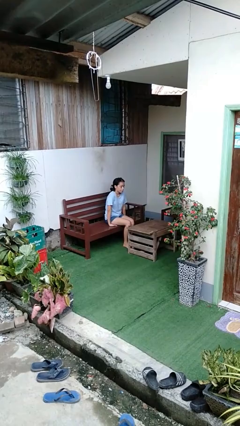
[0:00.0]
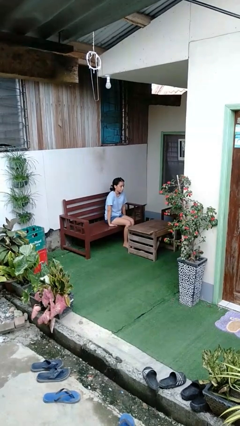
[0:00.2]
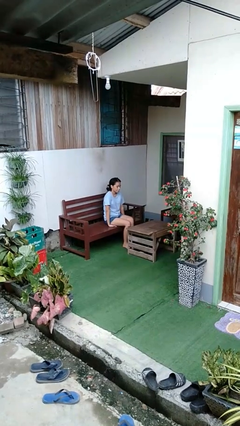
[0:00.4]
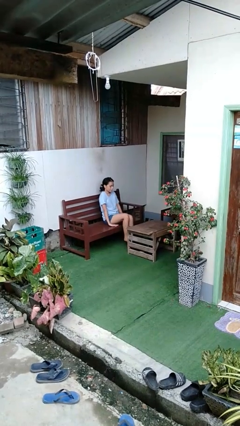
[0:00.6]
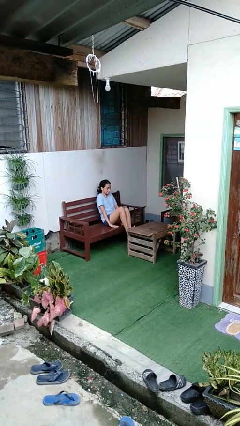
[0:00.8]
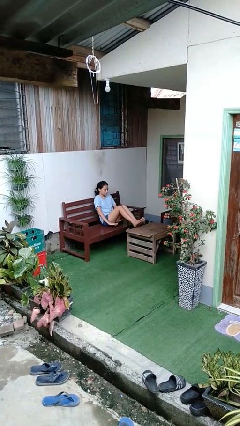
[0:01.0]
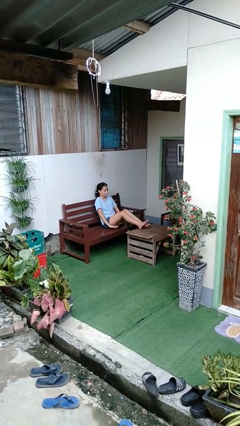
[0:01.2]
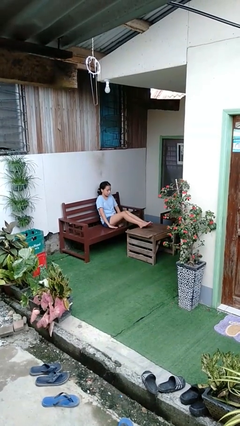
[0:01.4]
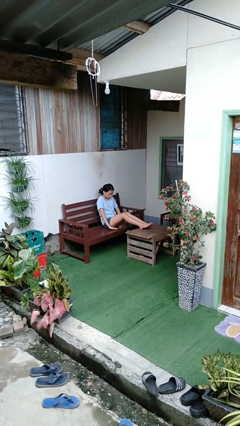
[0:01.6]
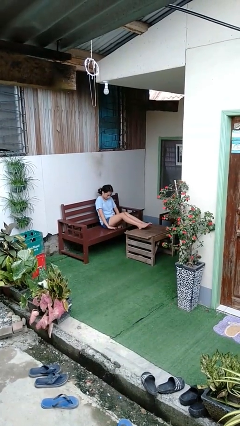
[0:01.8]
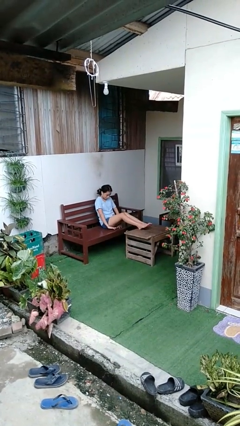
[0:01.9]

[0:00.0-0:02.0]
person puts feet up

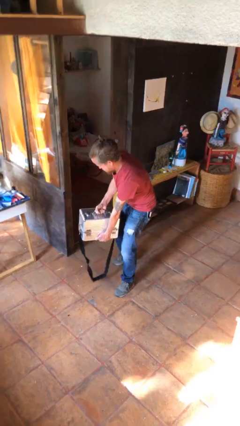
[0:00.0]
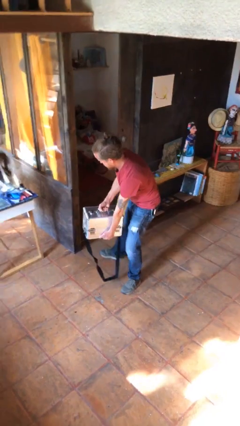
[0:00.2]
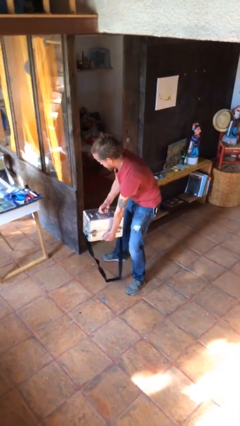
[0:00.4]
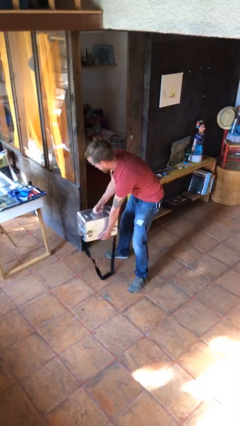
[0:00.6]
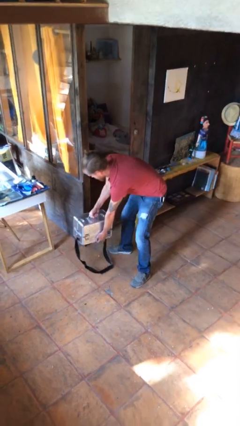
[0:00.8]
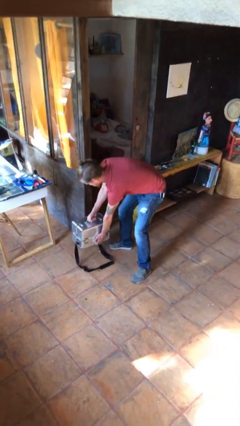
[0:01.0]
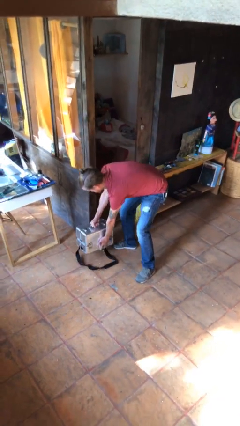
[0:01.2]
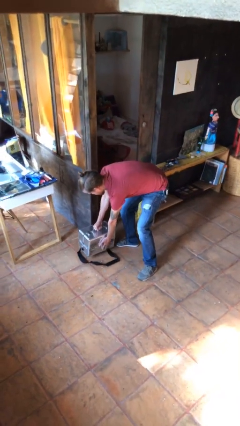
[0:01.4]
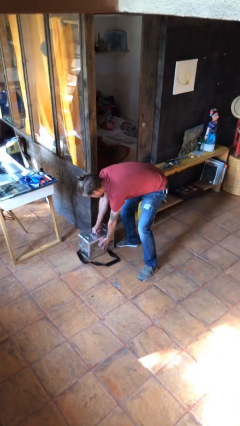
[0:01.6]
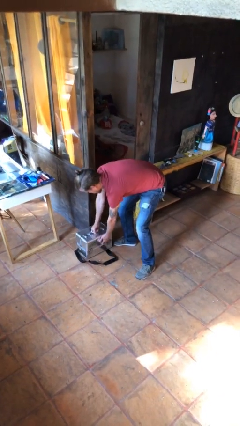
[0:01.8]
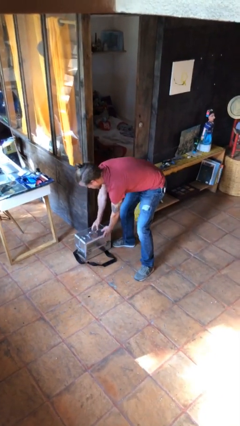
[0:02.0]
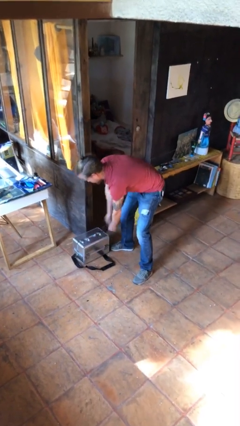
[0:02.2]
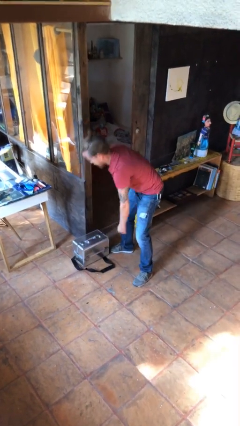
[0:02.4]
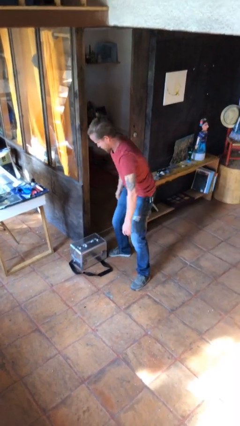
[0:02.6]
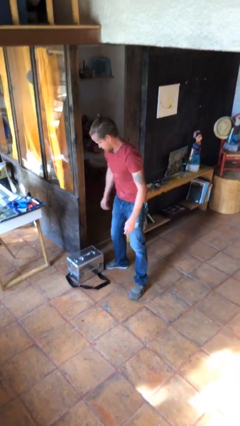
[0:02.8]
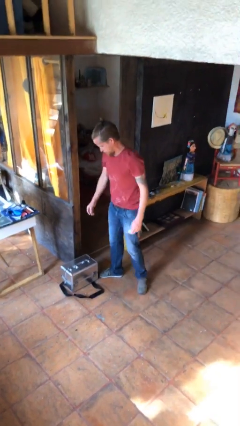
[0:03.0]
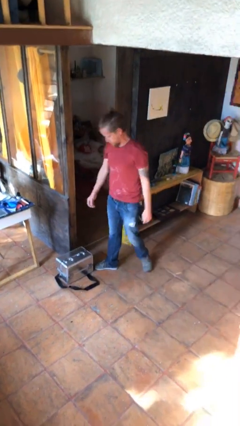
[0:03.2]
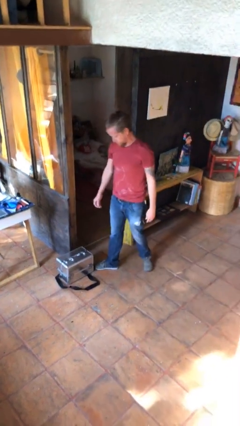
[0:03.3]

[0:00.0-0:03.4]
person puts down object on floor

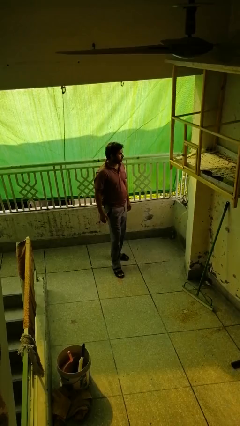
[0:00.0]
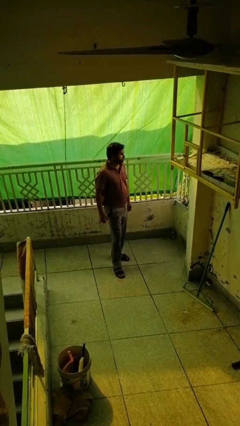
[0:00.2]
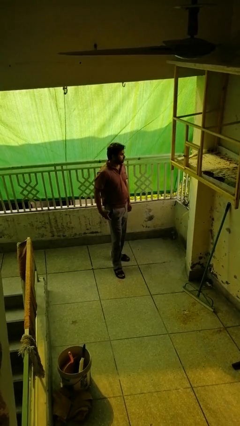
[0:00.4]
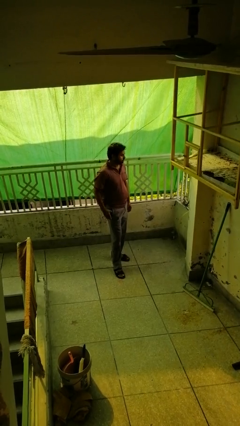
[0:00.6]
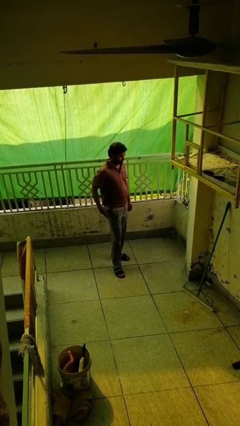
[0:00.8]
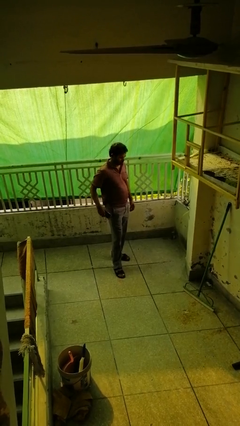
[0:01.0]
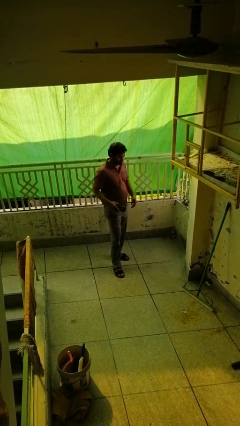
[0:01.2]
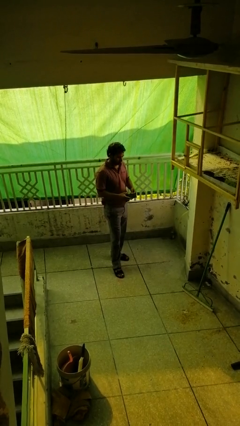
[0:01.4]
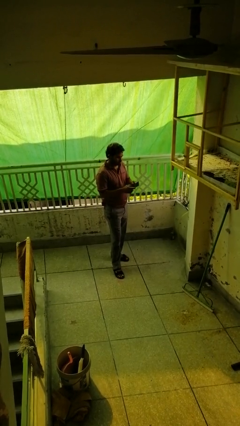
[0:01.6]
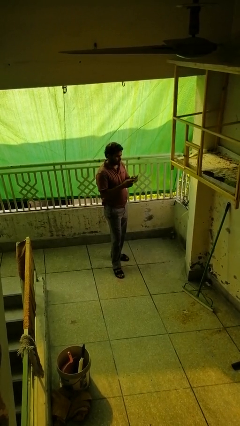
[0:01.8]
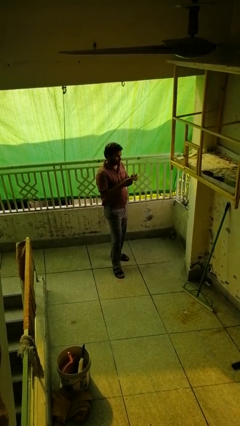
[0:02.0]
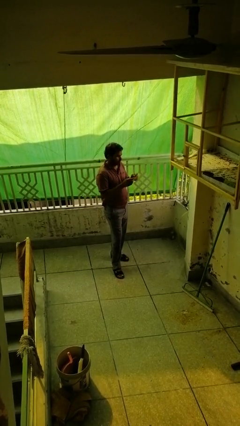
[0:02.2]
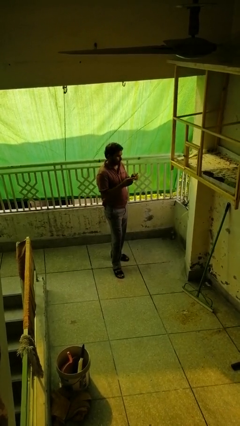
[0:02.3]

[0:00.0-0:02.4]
person takes phone from pocket

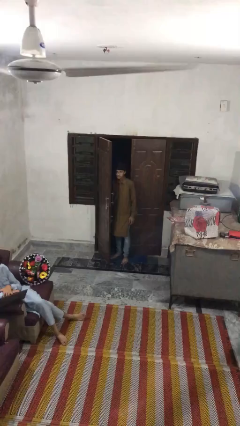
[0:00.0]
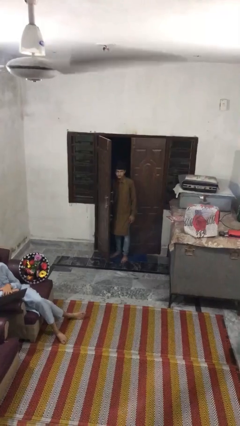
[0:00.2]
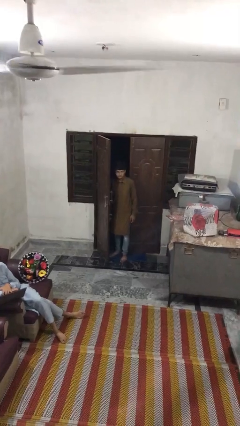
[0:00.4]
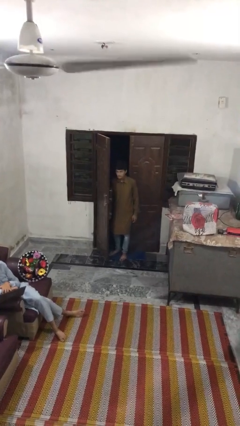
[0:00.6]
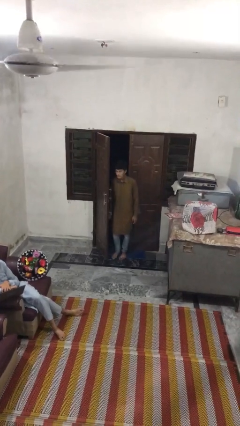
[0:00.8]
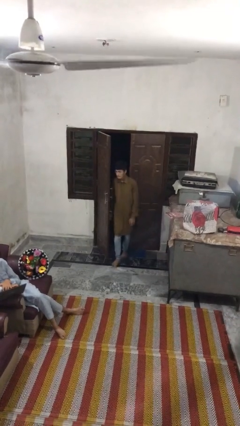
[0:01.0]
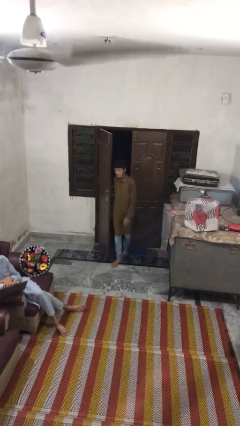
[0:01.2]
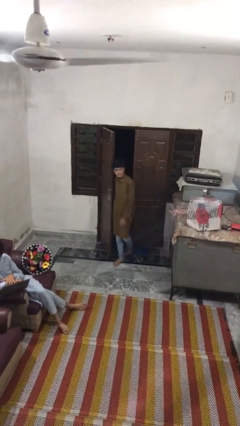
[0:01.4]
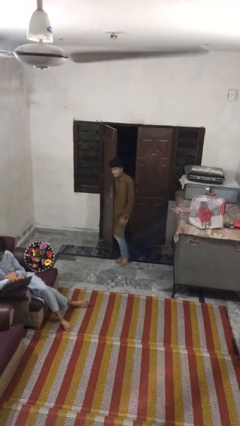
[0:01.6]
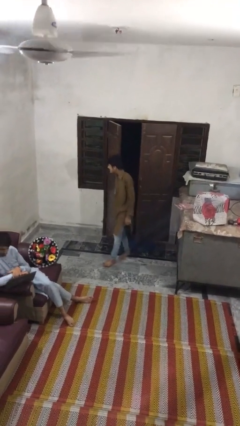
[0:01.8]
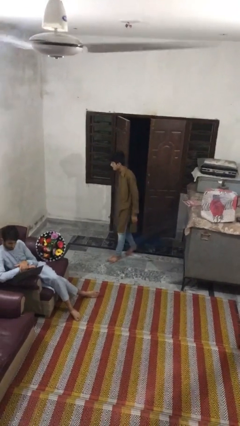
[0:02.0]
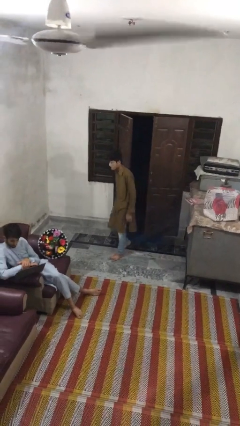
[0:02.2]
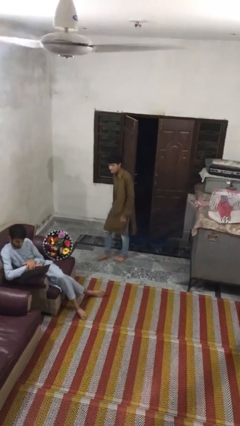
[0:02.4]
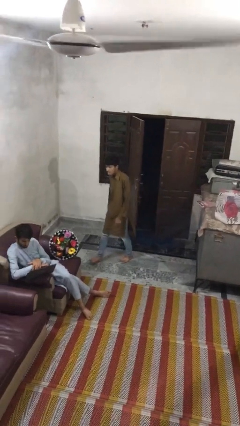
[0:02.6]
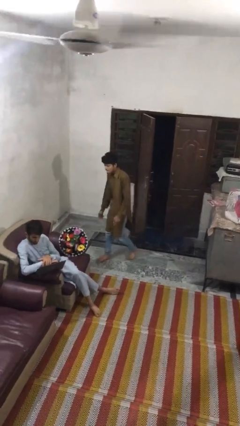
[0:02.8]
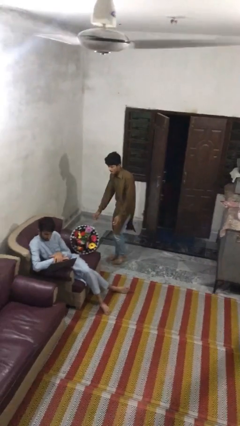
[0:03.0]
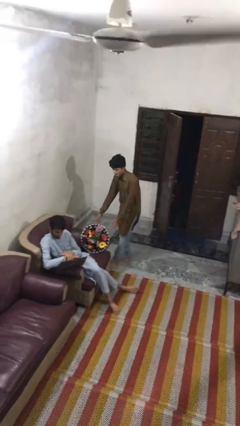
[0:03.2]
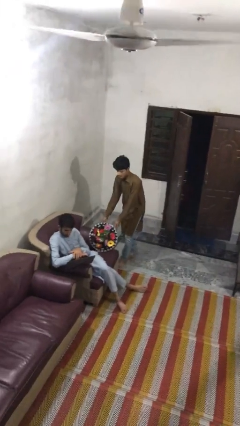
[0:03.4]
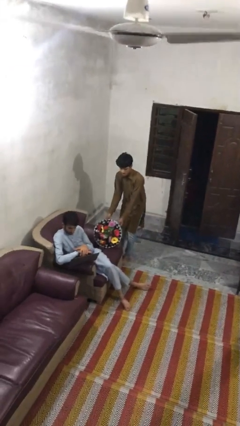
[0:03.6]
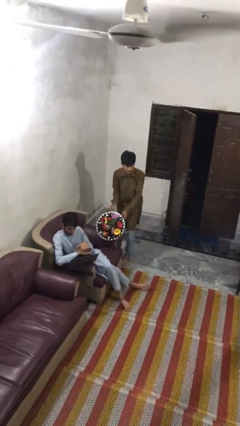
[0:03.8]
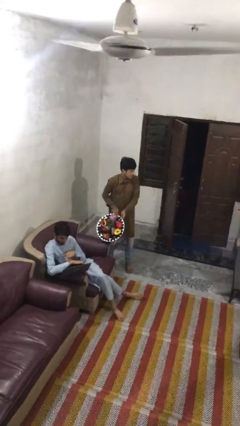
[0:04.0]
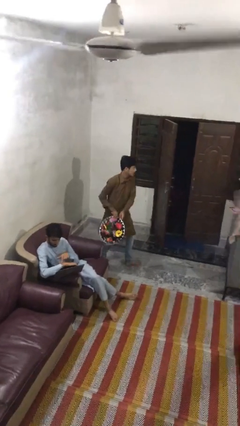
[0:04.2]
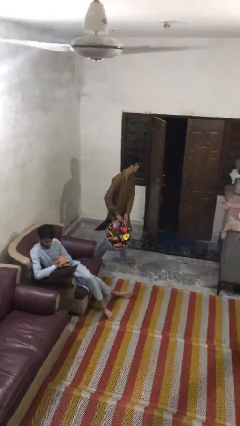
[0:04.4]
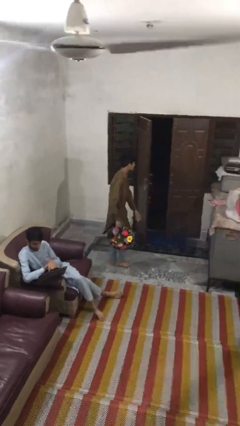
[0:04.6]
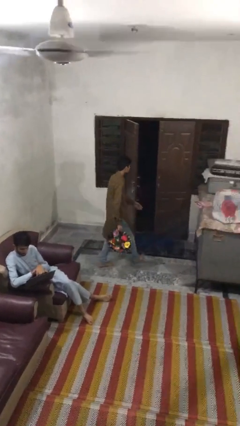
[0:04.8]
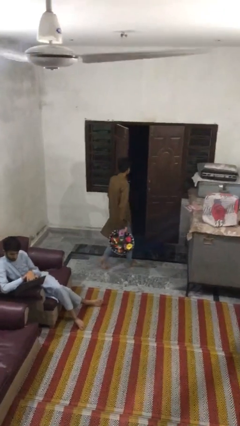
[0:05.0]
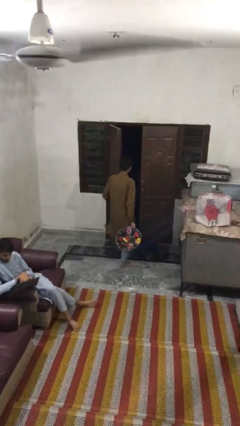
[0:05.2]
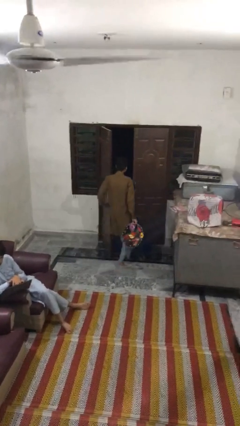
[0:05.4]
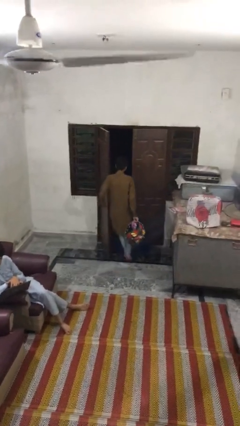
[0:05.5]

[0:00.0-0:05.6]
person steals object from person

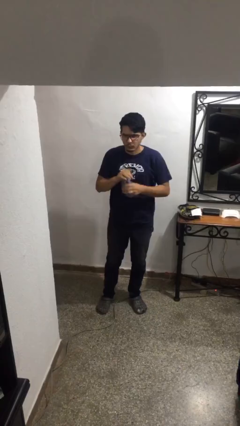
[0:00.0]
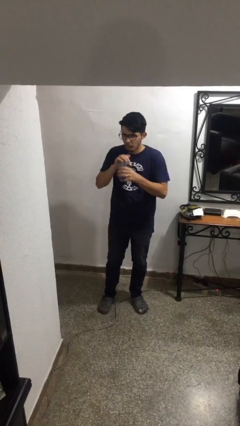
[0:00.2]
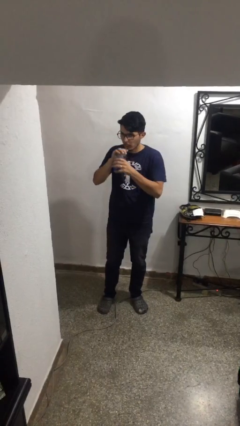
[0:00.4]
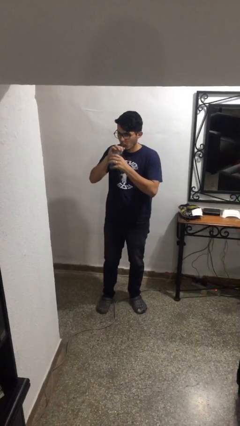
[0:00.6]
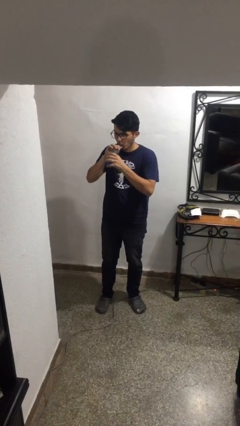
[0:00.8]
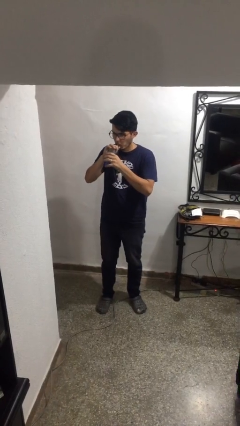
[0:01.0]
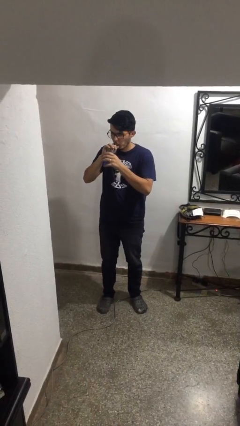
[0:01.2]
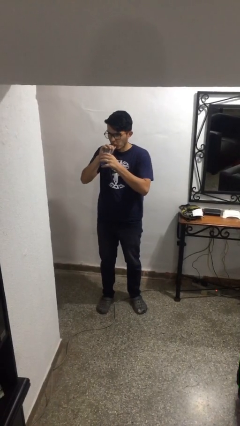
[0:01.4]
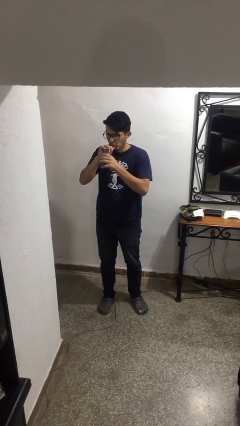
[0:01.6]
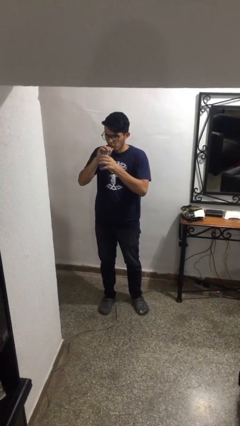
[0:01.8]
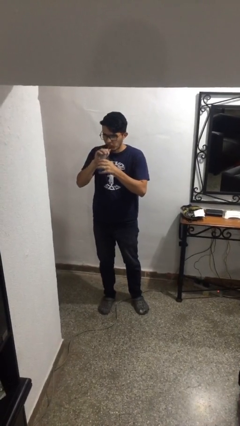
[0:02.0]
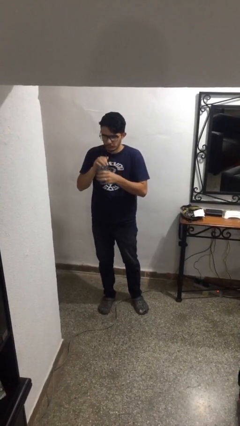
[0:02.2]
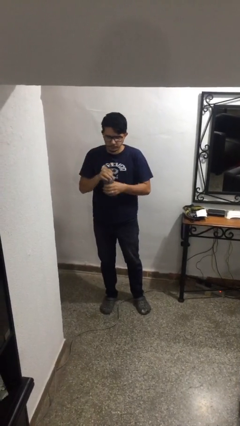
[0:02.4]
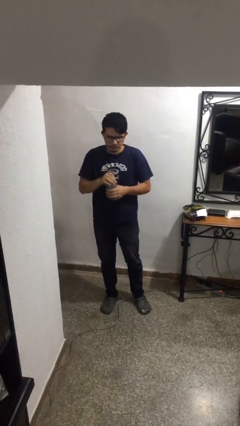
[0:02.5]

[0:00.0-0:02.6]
person drinks from straw

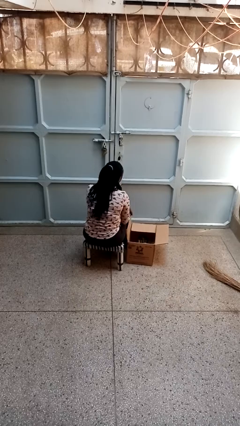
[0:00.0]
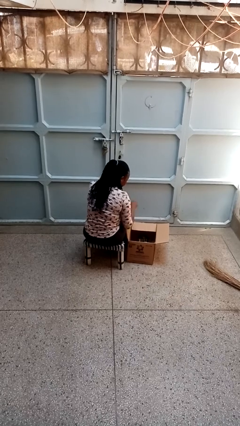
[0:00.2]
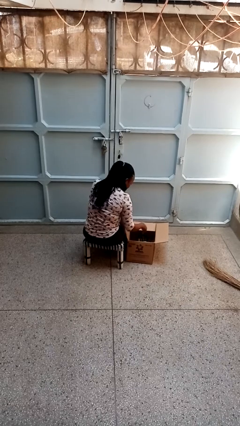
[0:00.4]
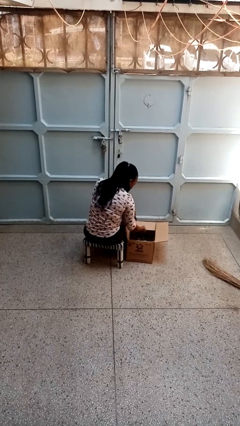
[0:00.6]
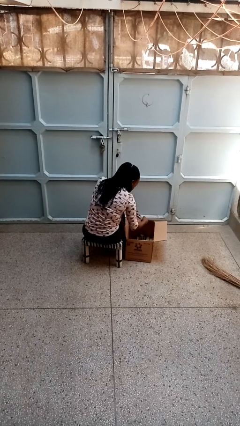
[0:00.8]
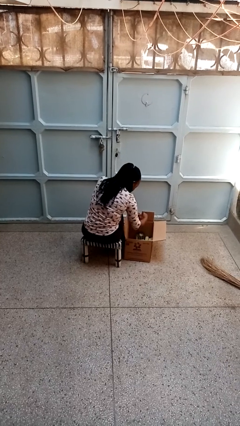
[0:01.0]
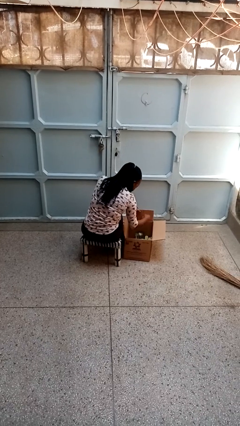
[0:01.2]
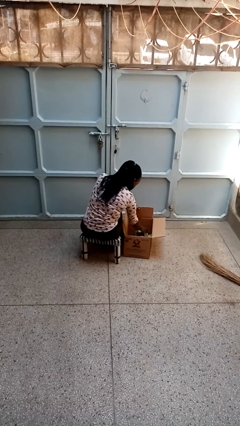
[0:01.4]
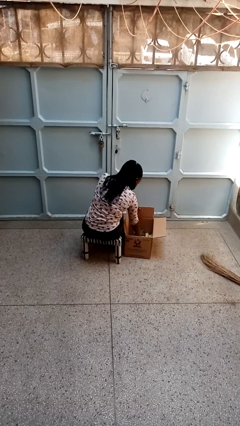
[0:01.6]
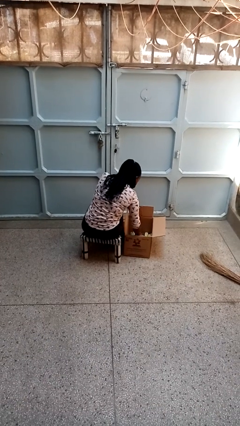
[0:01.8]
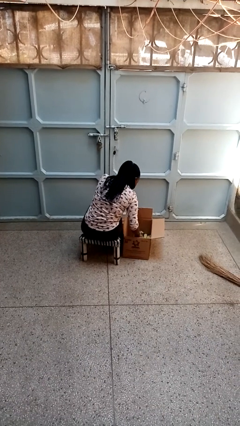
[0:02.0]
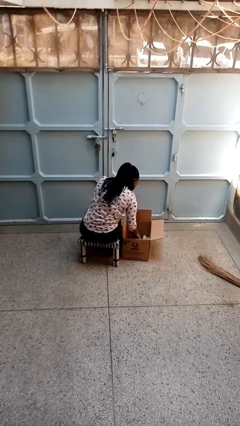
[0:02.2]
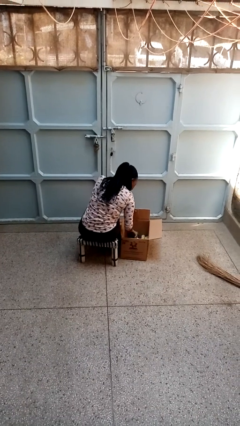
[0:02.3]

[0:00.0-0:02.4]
person searches in box
